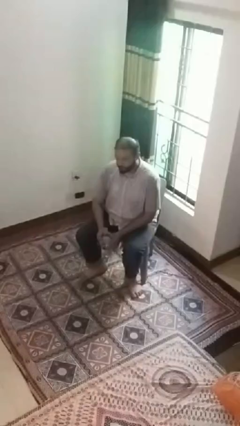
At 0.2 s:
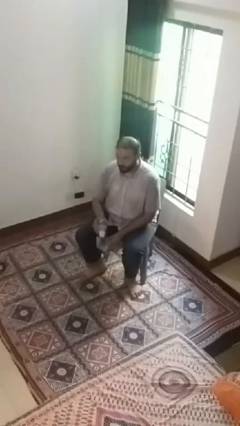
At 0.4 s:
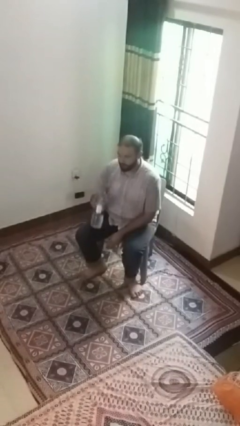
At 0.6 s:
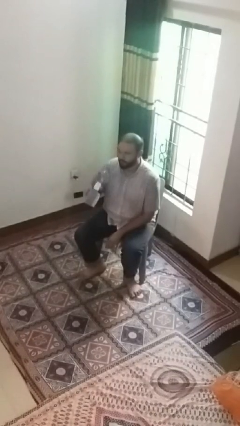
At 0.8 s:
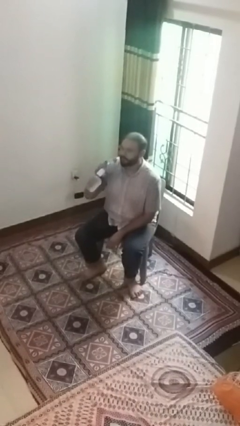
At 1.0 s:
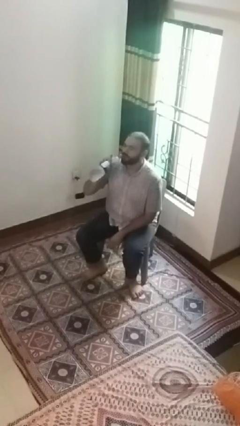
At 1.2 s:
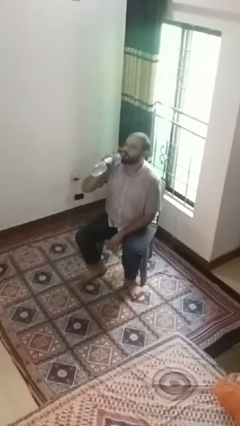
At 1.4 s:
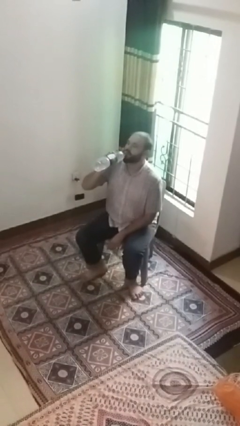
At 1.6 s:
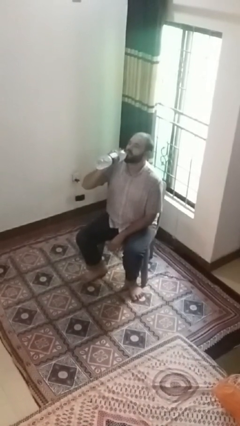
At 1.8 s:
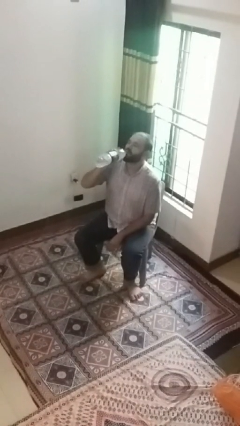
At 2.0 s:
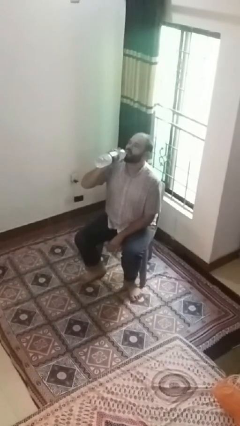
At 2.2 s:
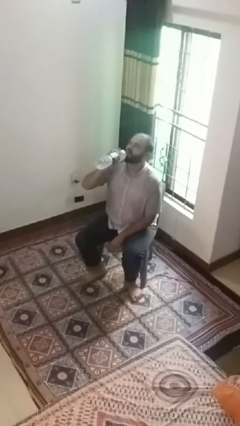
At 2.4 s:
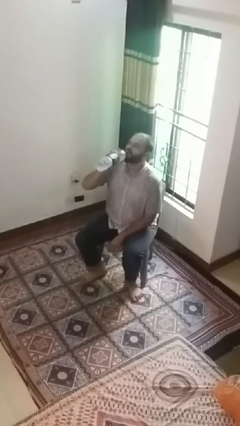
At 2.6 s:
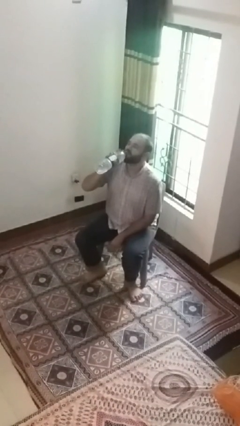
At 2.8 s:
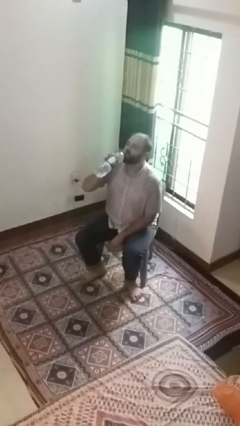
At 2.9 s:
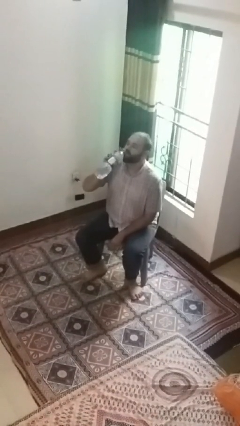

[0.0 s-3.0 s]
person drinks from bottle

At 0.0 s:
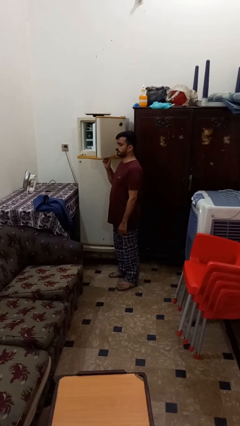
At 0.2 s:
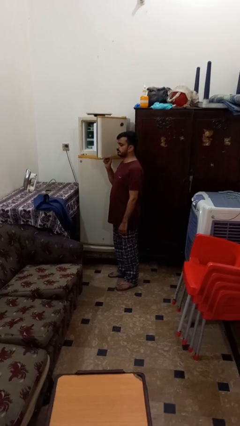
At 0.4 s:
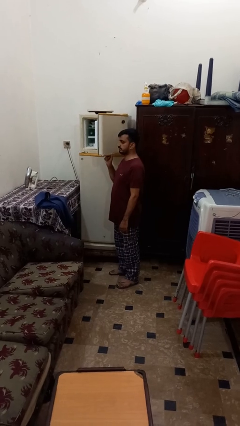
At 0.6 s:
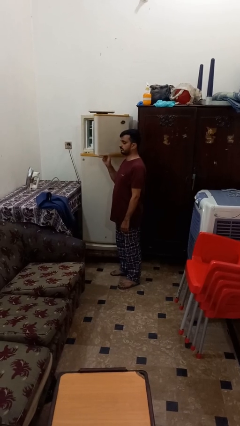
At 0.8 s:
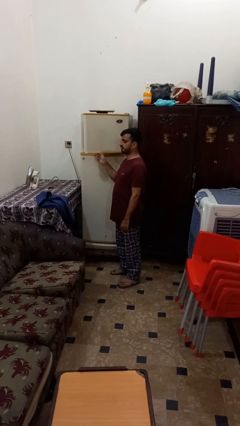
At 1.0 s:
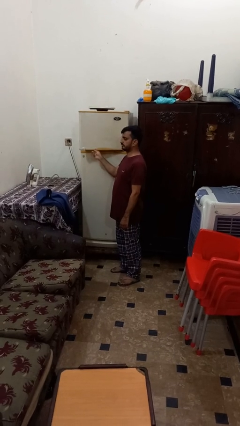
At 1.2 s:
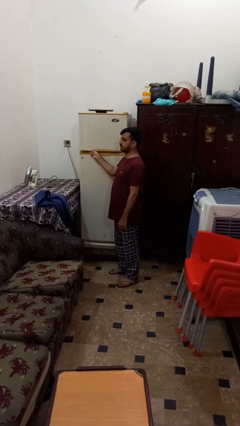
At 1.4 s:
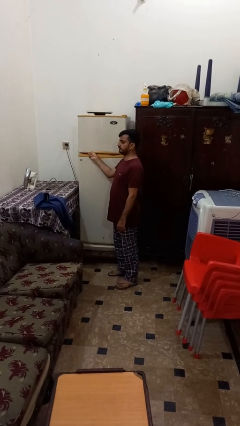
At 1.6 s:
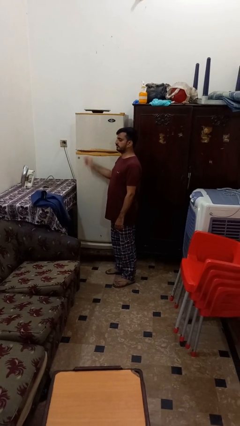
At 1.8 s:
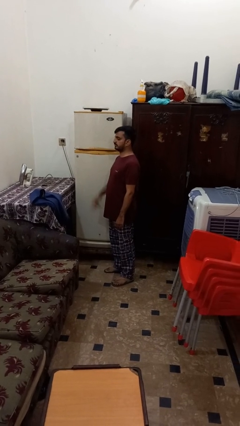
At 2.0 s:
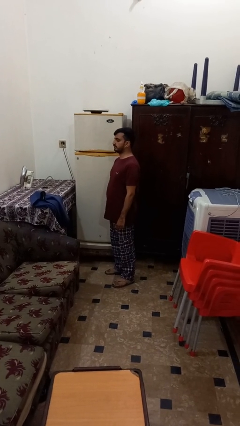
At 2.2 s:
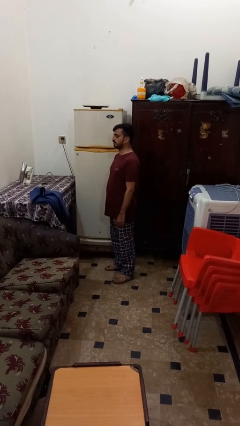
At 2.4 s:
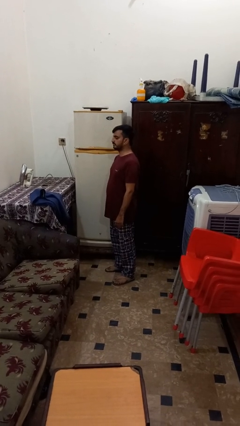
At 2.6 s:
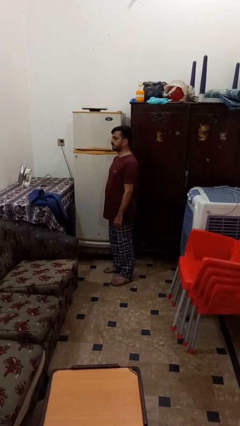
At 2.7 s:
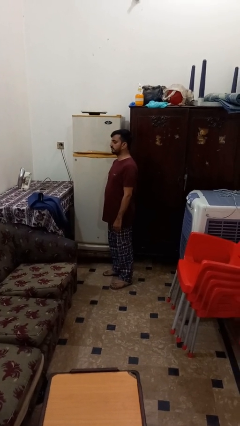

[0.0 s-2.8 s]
person closes refrigerator

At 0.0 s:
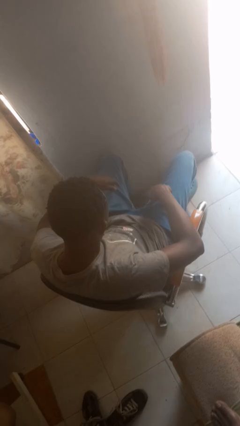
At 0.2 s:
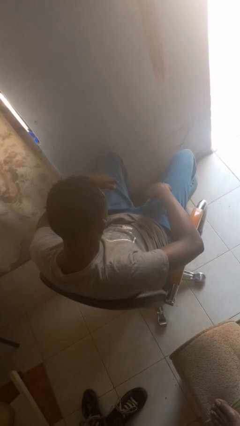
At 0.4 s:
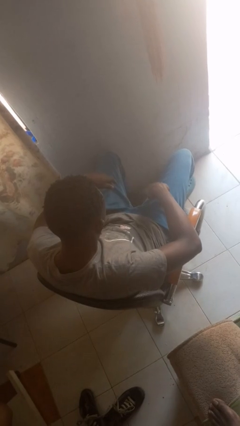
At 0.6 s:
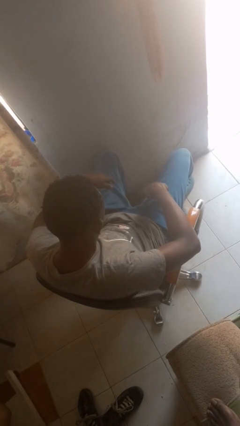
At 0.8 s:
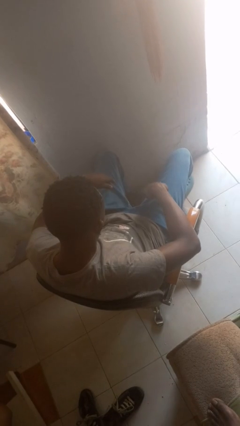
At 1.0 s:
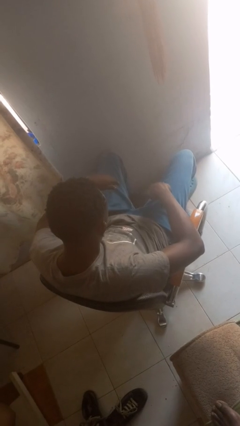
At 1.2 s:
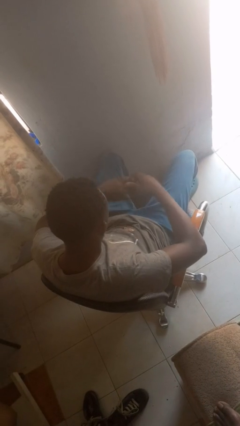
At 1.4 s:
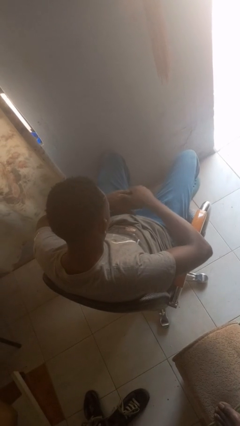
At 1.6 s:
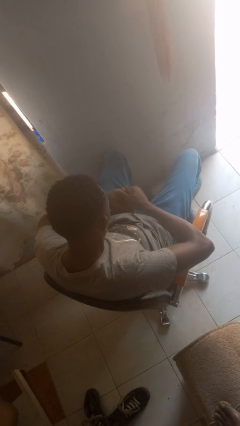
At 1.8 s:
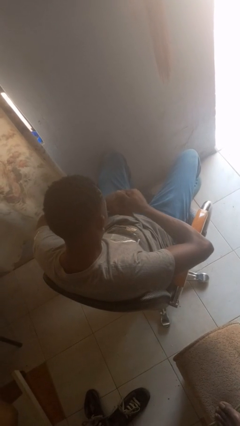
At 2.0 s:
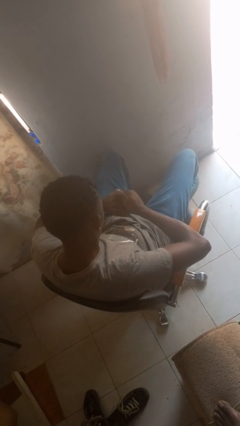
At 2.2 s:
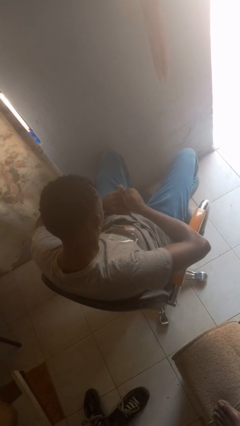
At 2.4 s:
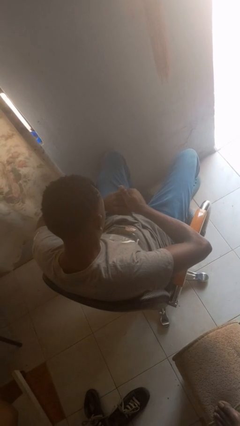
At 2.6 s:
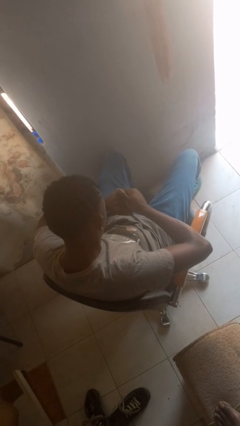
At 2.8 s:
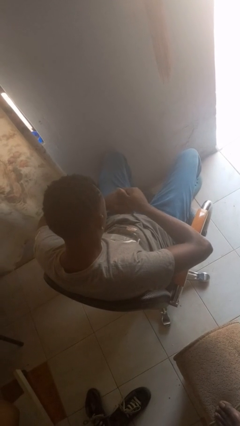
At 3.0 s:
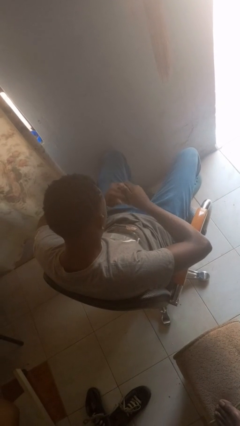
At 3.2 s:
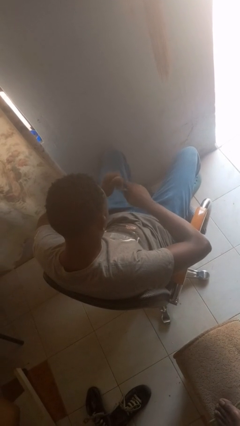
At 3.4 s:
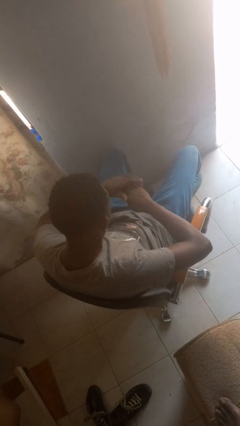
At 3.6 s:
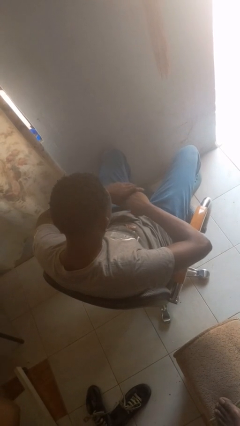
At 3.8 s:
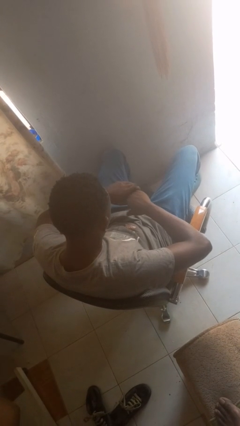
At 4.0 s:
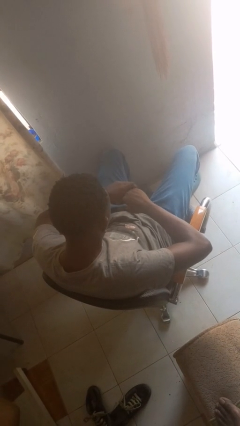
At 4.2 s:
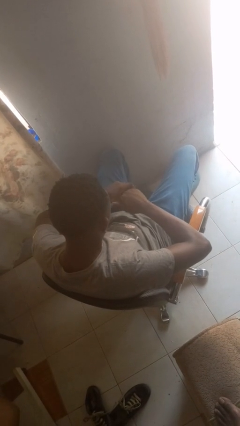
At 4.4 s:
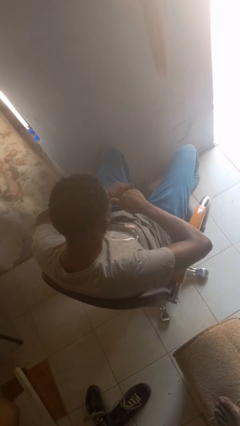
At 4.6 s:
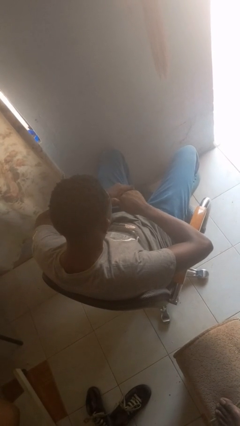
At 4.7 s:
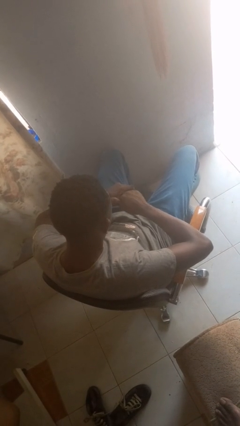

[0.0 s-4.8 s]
person looks at hands in lap

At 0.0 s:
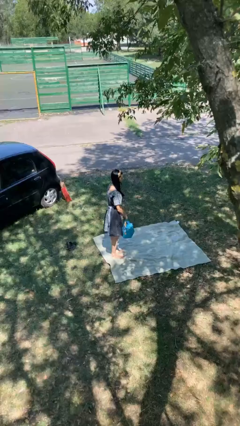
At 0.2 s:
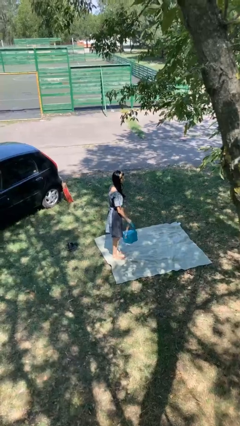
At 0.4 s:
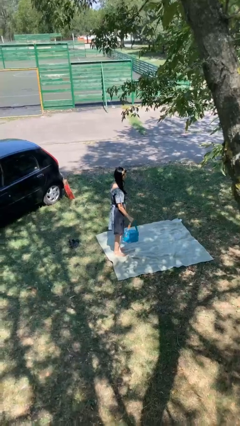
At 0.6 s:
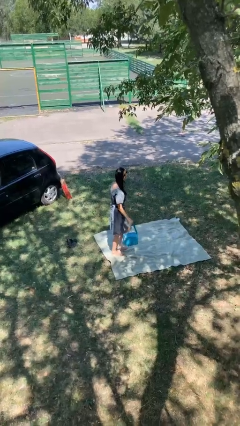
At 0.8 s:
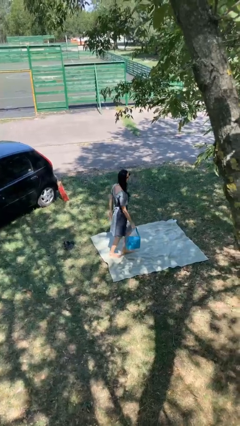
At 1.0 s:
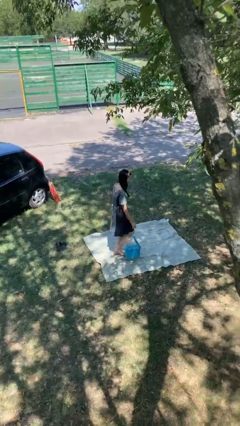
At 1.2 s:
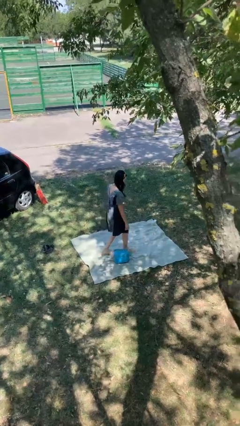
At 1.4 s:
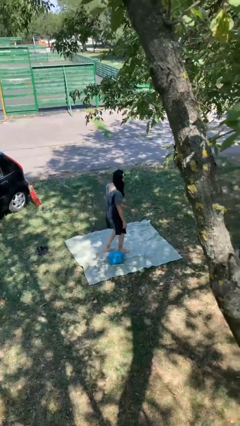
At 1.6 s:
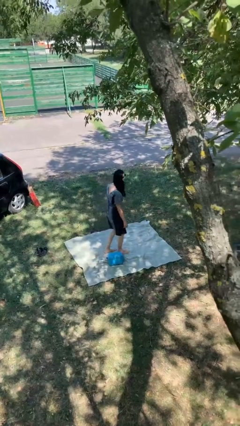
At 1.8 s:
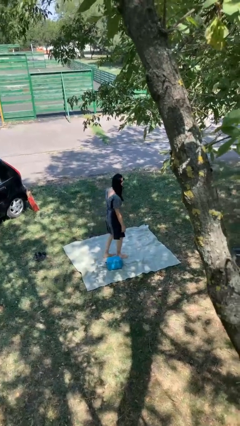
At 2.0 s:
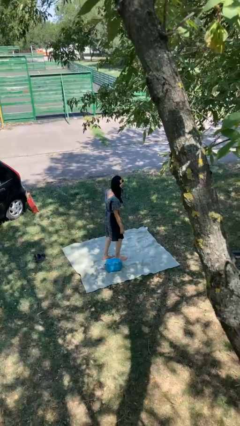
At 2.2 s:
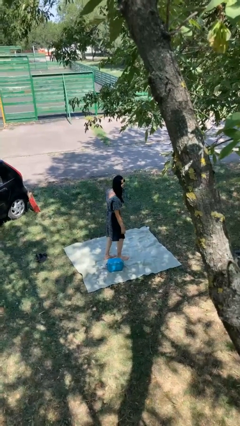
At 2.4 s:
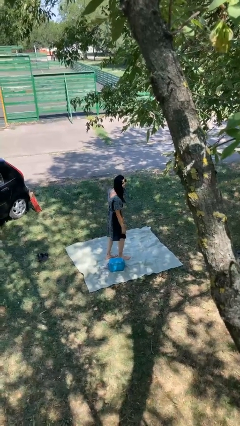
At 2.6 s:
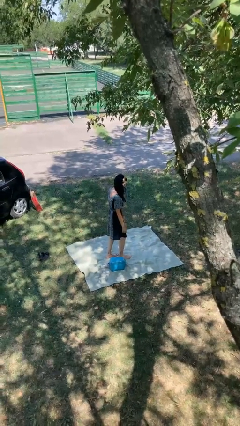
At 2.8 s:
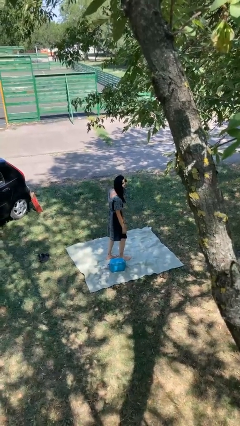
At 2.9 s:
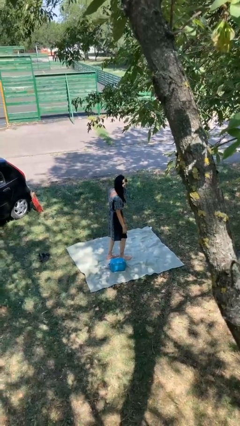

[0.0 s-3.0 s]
person drops object

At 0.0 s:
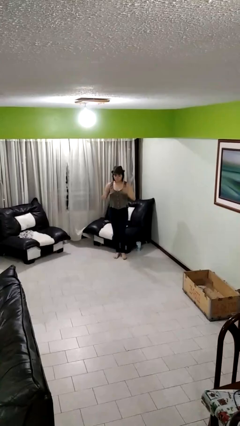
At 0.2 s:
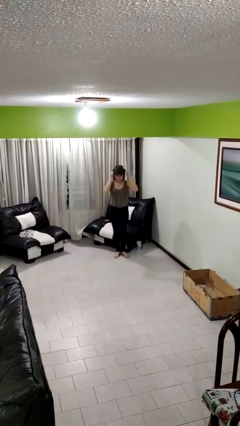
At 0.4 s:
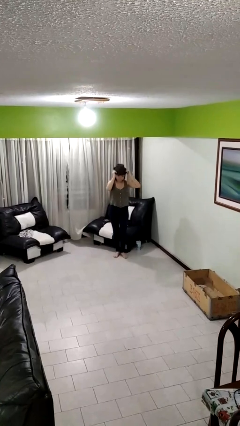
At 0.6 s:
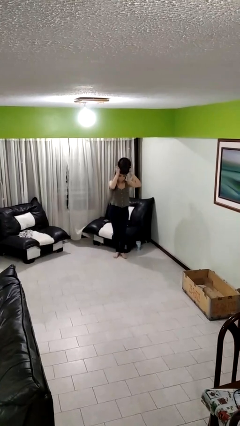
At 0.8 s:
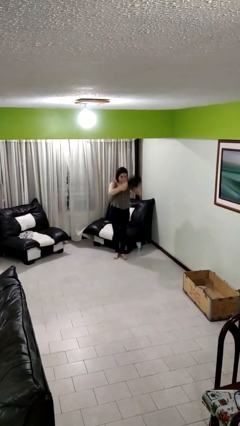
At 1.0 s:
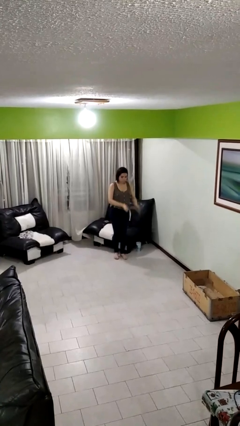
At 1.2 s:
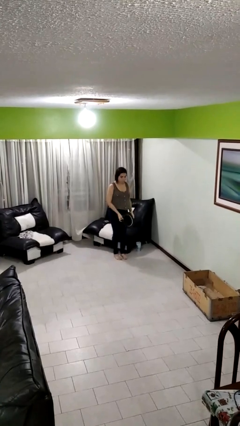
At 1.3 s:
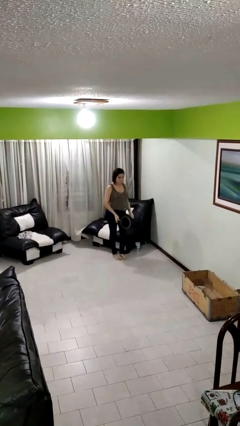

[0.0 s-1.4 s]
person takes off hat

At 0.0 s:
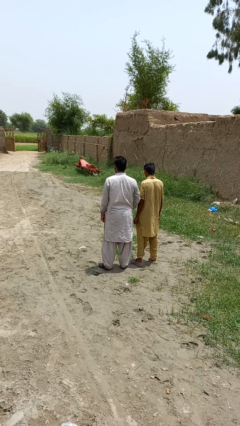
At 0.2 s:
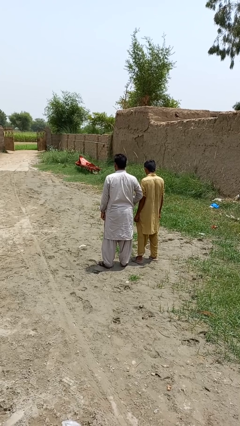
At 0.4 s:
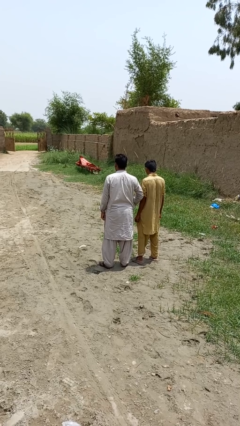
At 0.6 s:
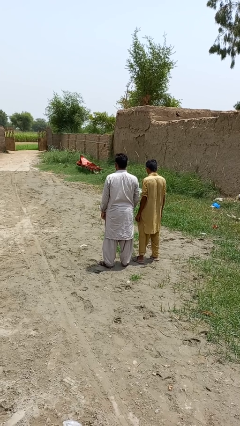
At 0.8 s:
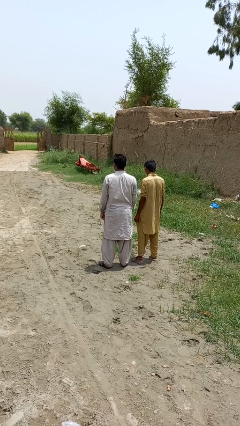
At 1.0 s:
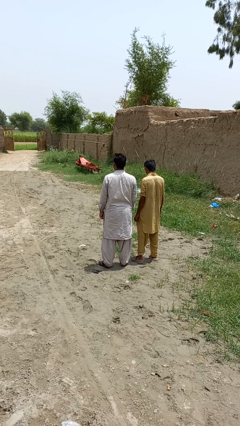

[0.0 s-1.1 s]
person nudges person with elbow

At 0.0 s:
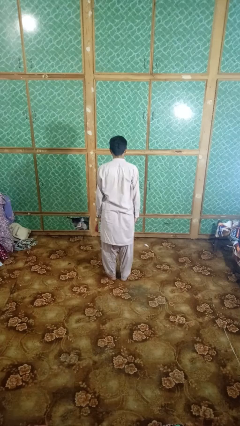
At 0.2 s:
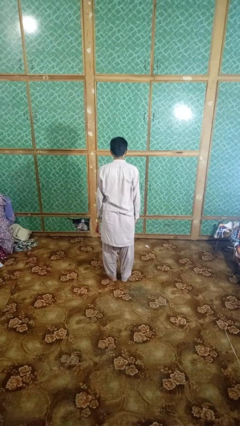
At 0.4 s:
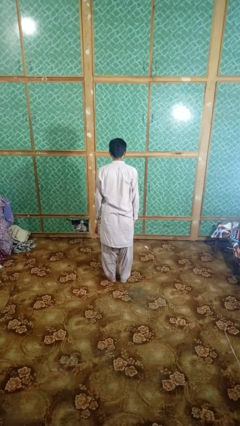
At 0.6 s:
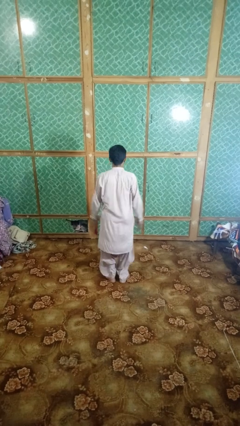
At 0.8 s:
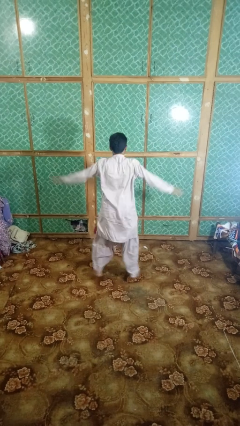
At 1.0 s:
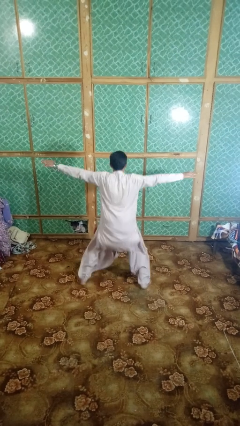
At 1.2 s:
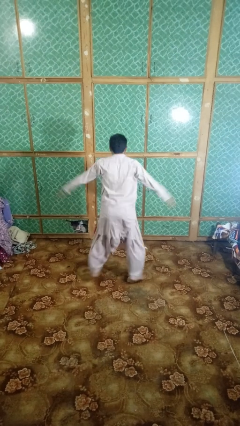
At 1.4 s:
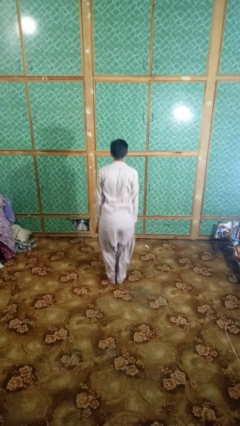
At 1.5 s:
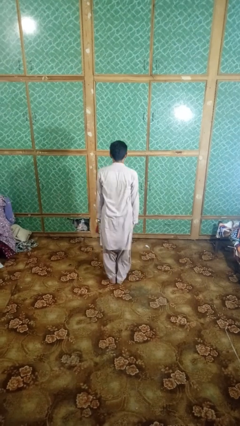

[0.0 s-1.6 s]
person exercises with jumping jacks
